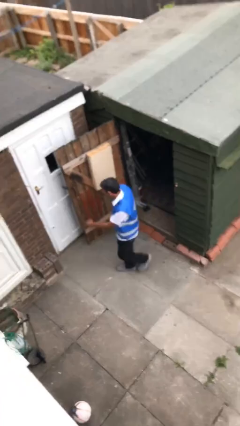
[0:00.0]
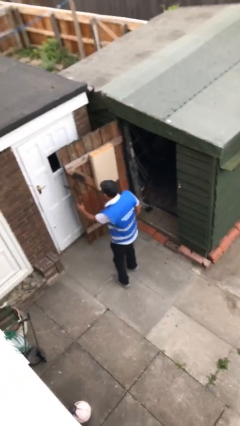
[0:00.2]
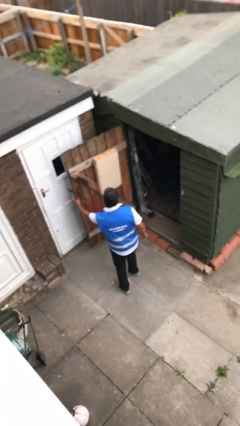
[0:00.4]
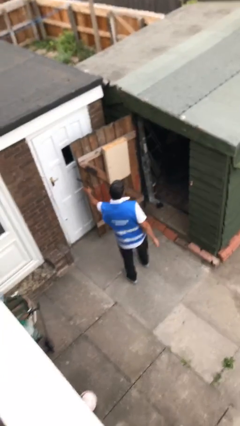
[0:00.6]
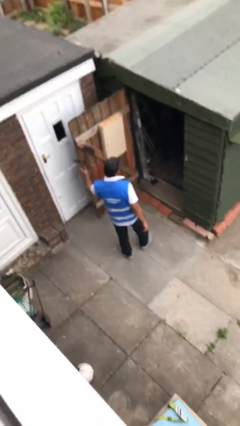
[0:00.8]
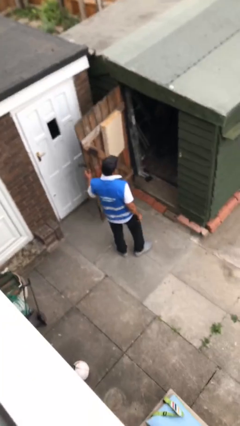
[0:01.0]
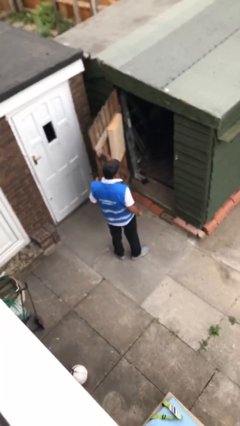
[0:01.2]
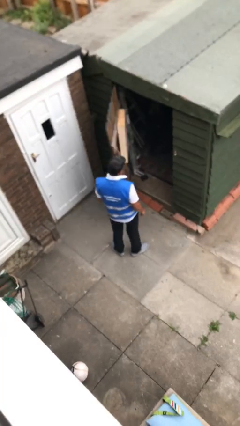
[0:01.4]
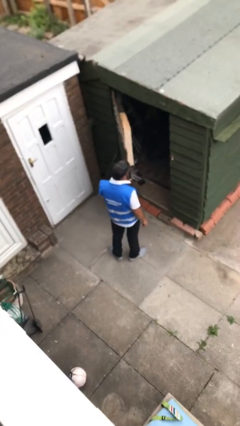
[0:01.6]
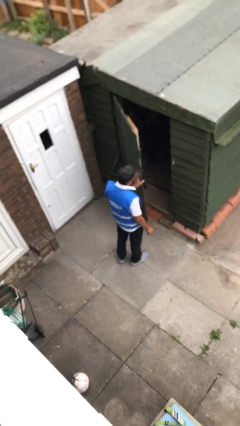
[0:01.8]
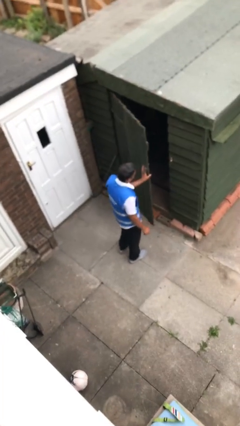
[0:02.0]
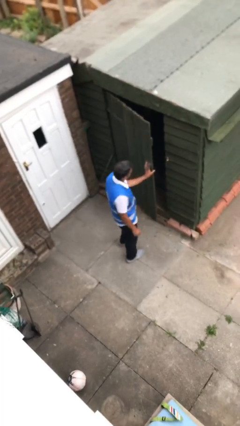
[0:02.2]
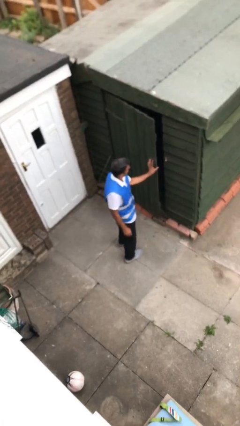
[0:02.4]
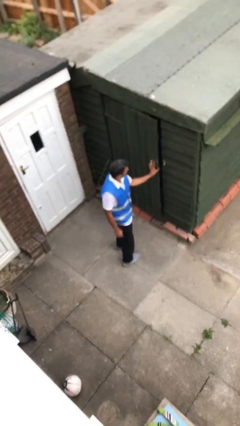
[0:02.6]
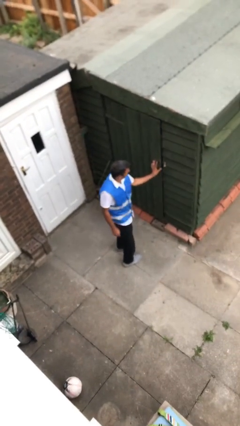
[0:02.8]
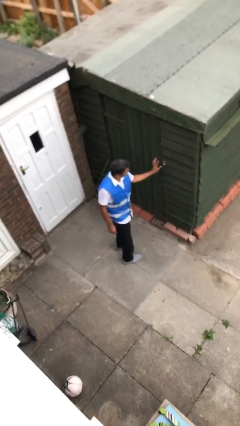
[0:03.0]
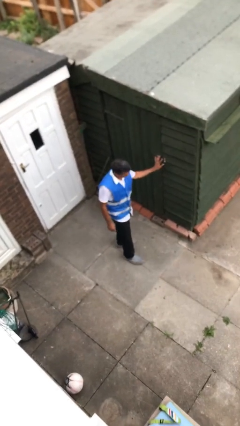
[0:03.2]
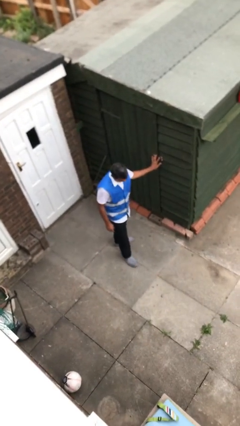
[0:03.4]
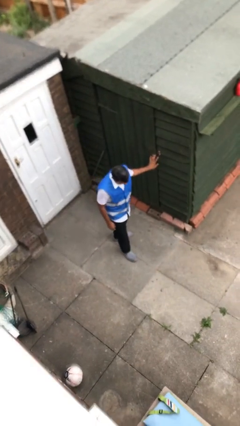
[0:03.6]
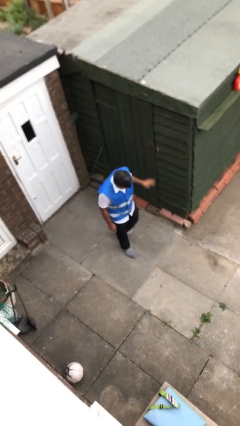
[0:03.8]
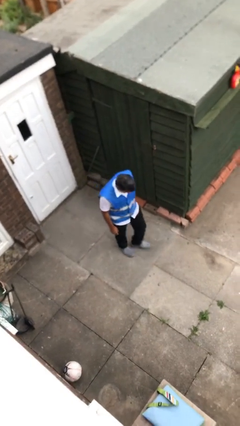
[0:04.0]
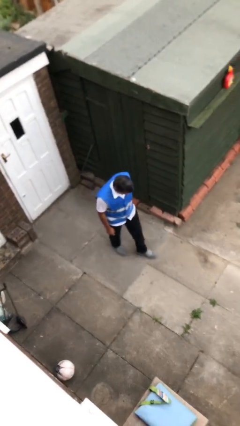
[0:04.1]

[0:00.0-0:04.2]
person closes facility door

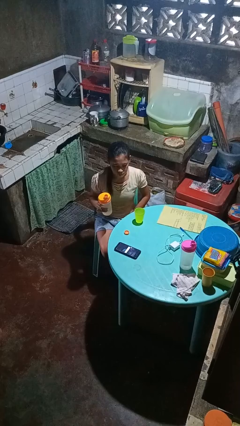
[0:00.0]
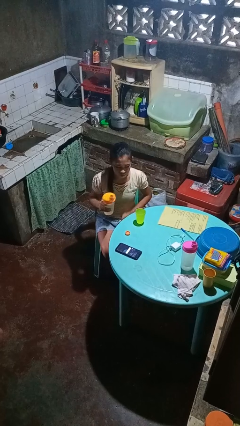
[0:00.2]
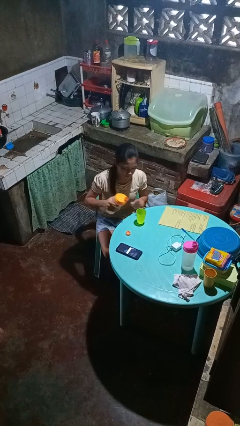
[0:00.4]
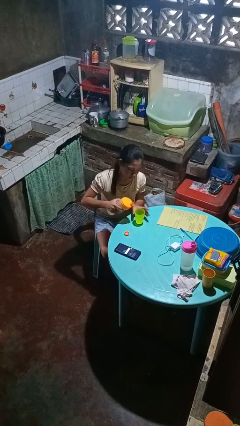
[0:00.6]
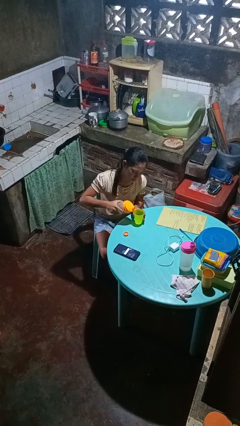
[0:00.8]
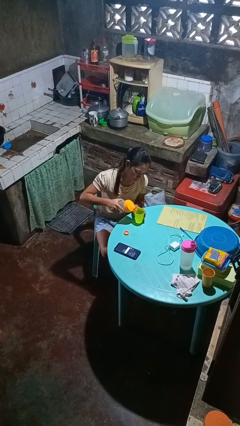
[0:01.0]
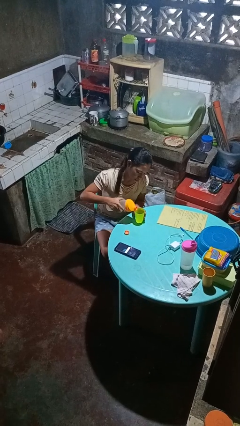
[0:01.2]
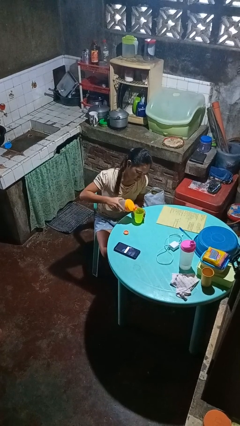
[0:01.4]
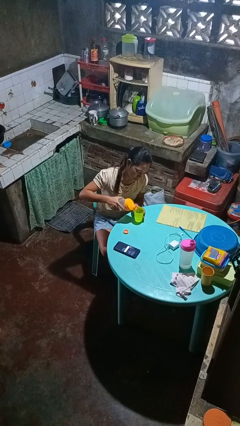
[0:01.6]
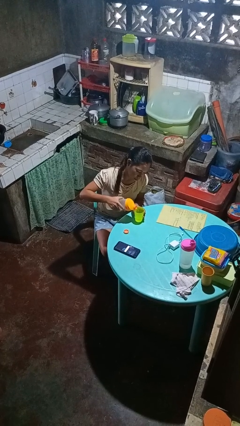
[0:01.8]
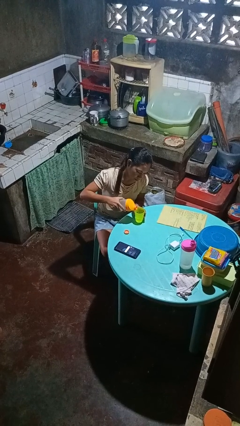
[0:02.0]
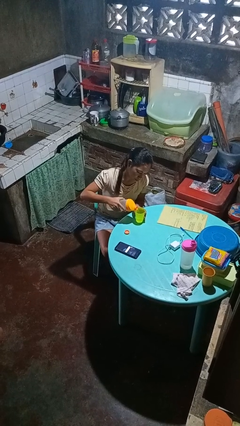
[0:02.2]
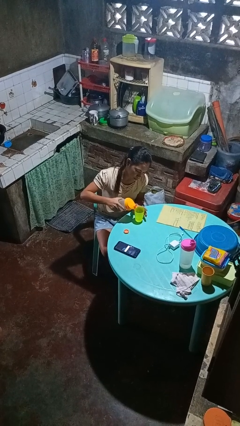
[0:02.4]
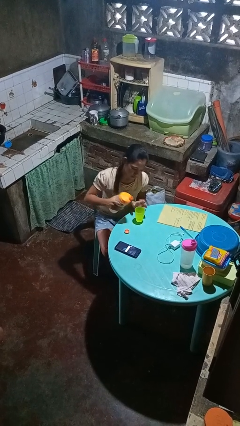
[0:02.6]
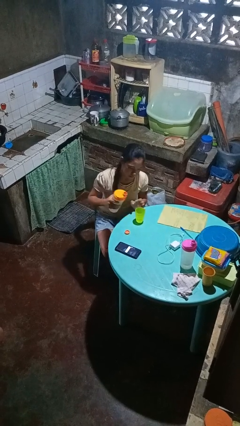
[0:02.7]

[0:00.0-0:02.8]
person pours liquid into cup

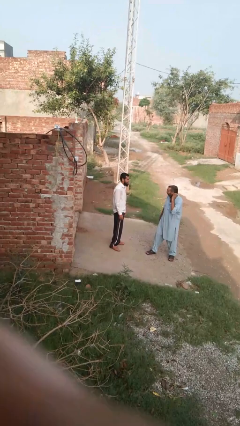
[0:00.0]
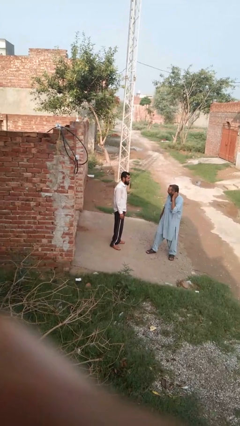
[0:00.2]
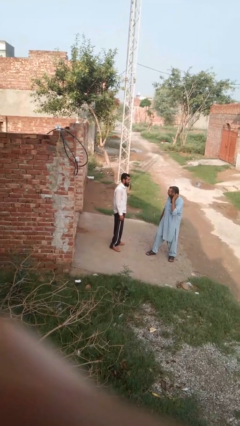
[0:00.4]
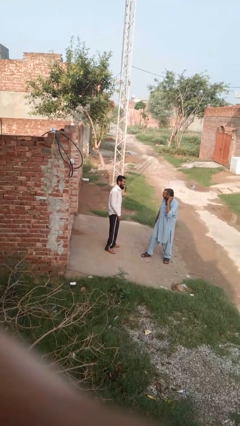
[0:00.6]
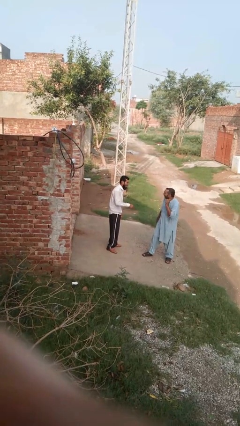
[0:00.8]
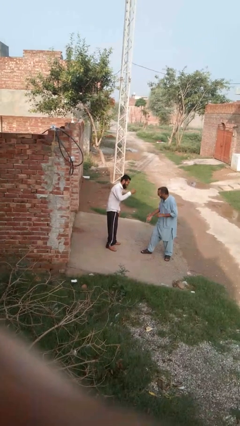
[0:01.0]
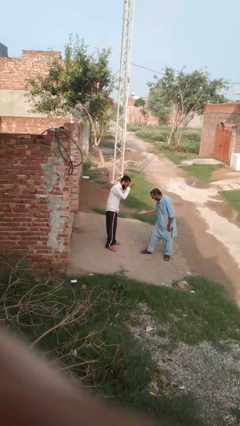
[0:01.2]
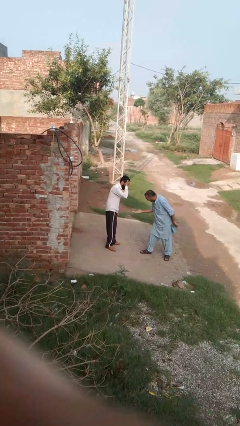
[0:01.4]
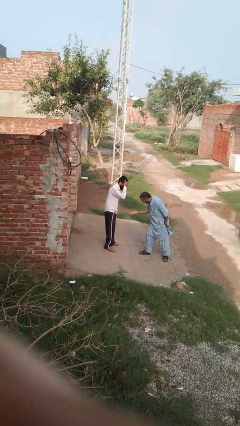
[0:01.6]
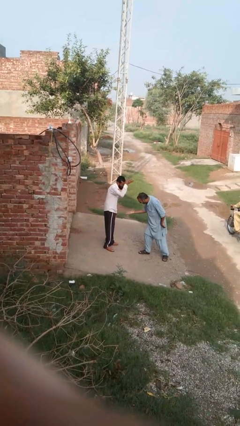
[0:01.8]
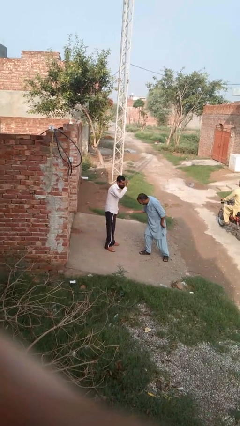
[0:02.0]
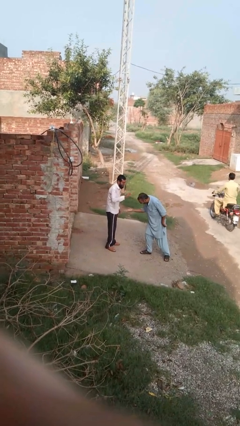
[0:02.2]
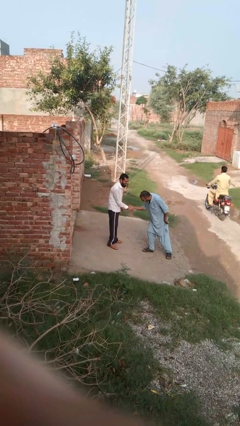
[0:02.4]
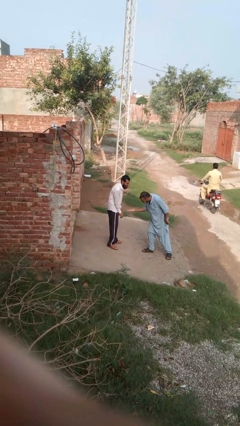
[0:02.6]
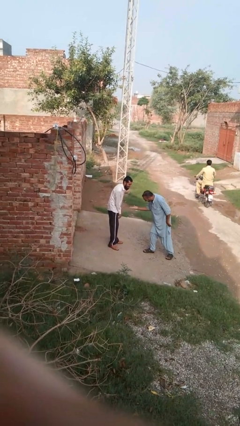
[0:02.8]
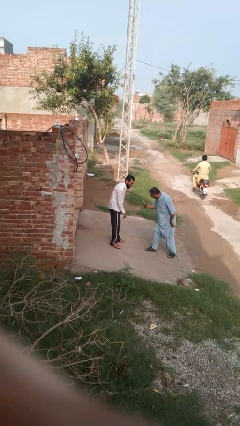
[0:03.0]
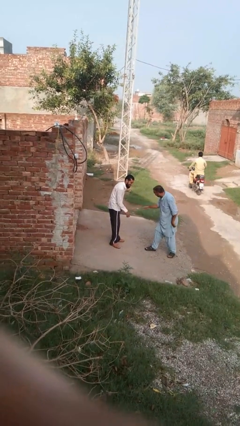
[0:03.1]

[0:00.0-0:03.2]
person laughs with person

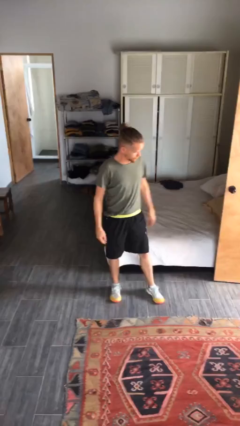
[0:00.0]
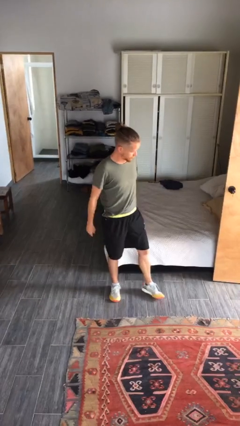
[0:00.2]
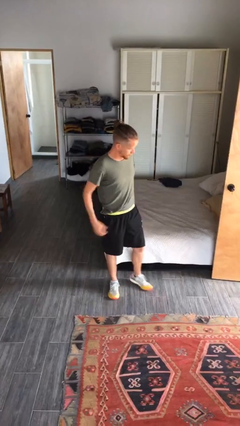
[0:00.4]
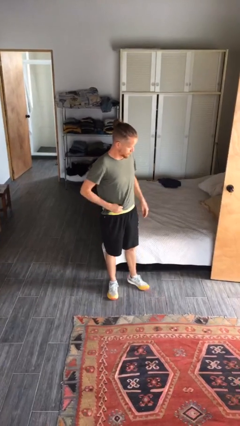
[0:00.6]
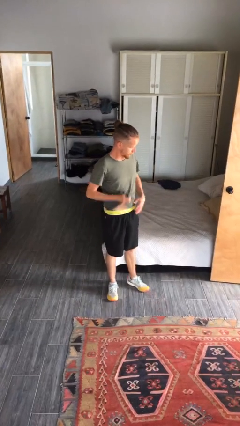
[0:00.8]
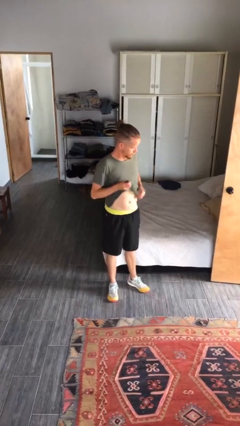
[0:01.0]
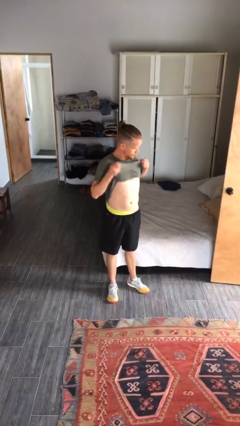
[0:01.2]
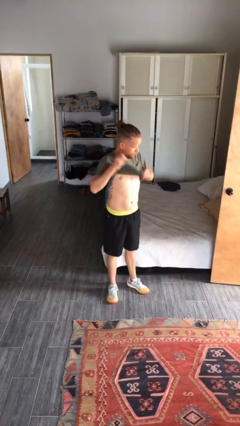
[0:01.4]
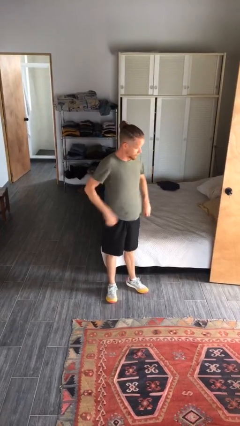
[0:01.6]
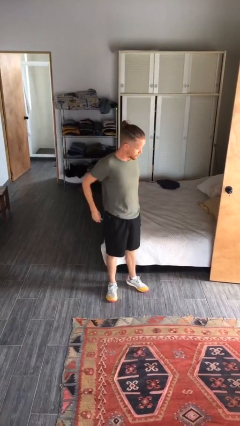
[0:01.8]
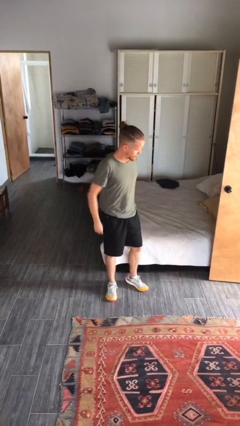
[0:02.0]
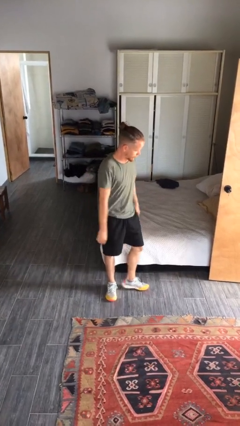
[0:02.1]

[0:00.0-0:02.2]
person untucks shirt

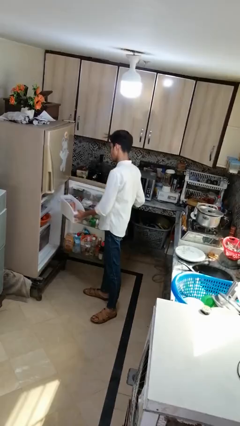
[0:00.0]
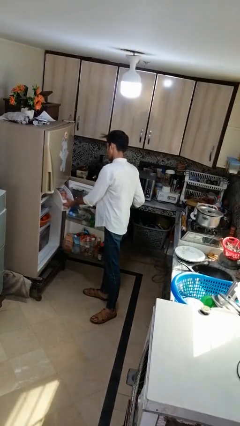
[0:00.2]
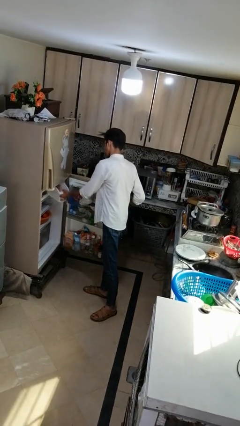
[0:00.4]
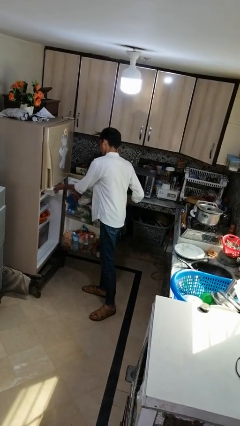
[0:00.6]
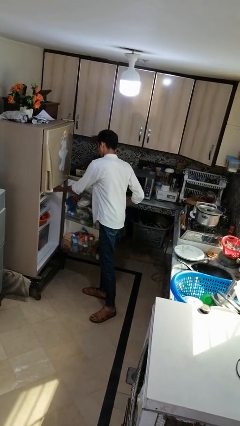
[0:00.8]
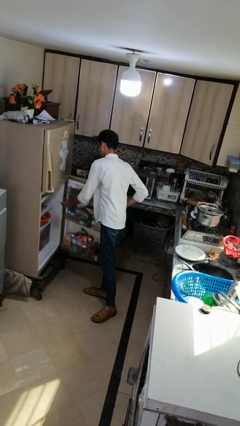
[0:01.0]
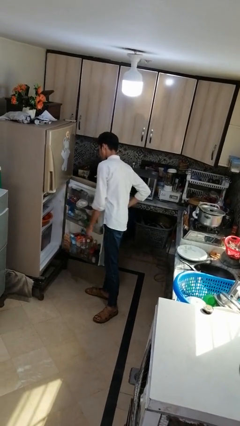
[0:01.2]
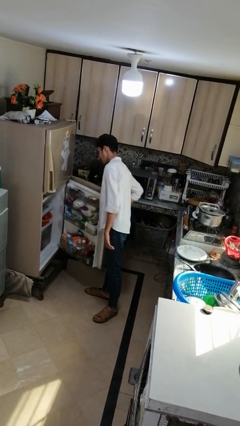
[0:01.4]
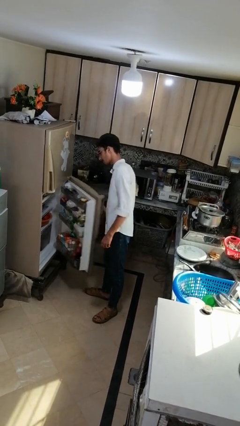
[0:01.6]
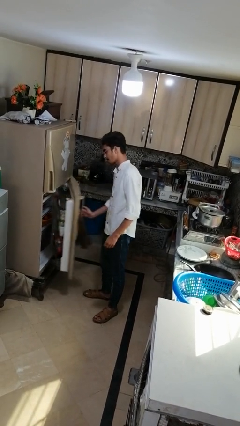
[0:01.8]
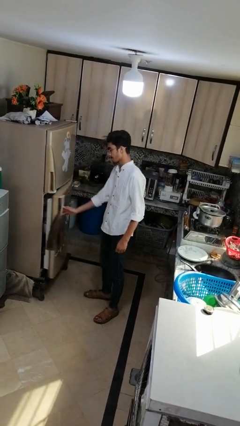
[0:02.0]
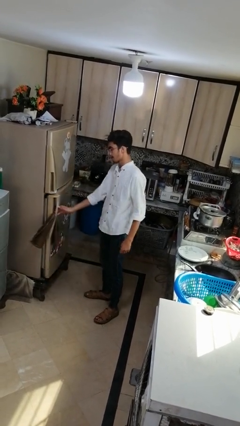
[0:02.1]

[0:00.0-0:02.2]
person puts object into refrigerator

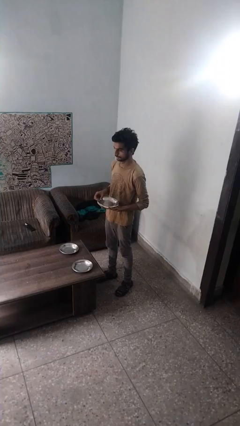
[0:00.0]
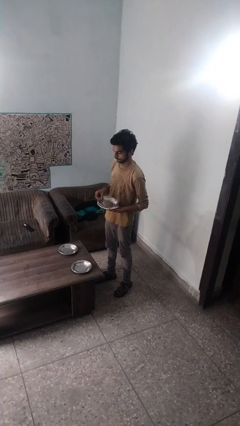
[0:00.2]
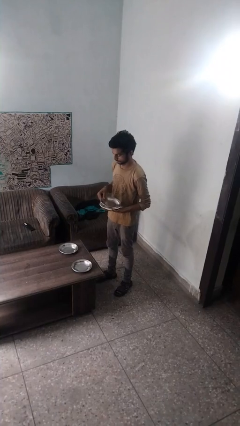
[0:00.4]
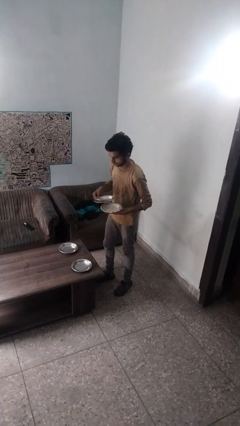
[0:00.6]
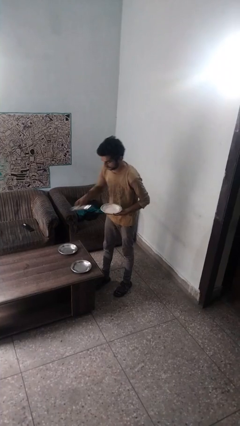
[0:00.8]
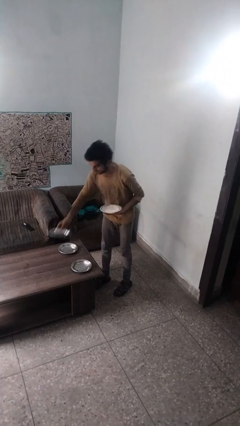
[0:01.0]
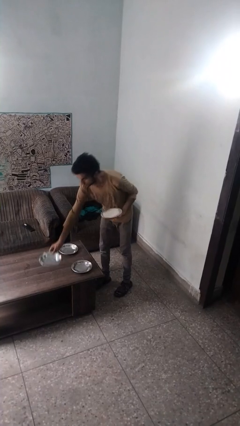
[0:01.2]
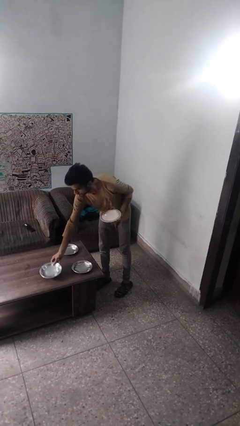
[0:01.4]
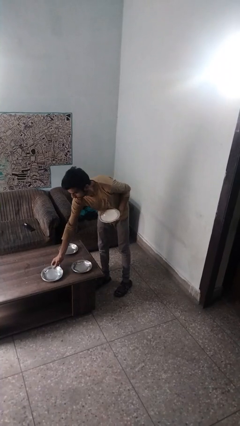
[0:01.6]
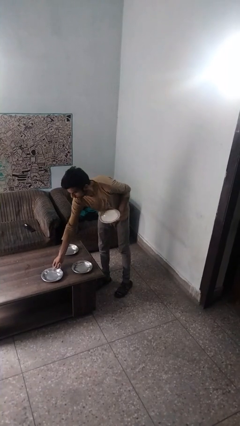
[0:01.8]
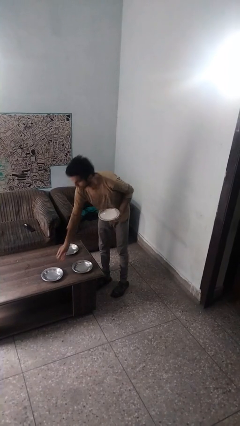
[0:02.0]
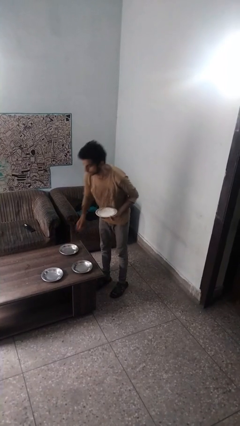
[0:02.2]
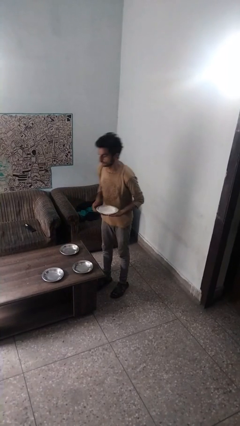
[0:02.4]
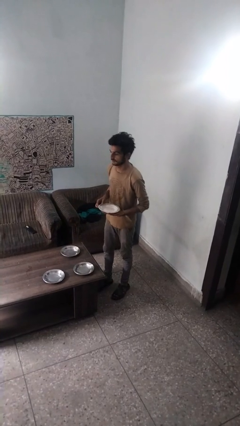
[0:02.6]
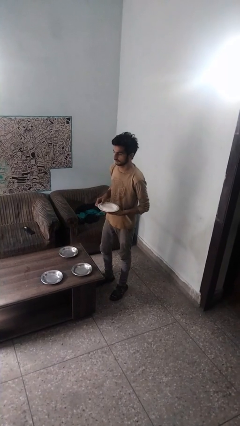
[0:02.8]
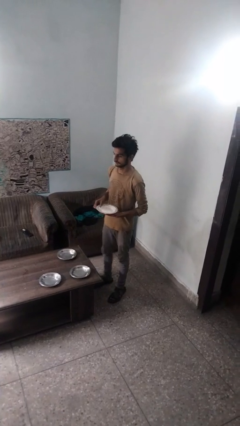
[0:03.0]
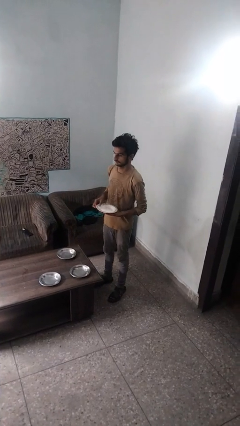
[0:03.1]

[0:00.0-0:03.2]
person sets table
